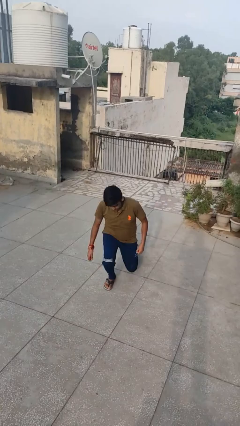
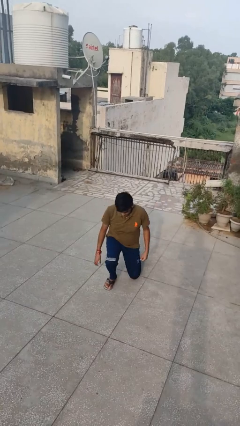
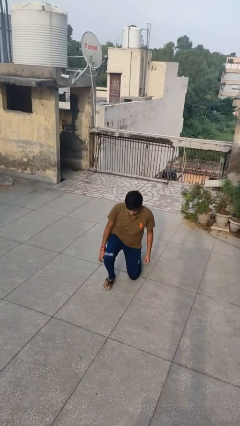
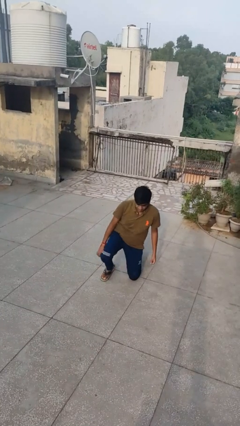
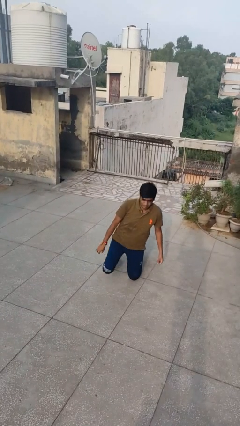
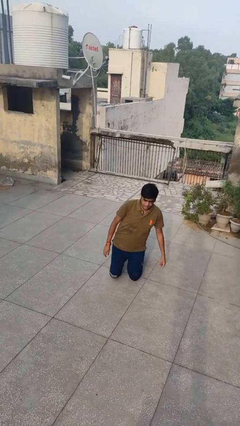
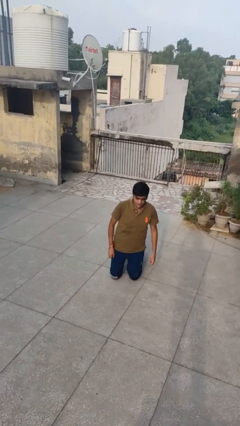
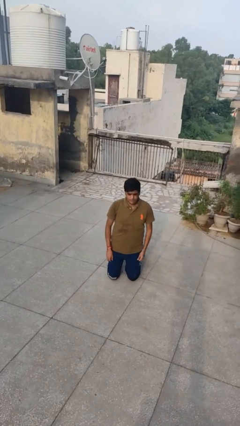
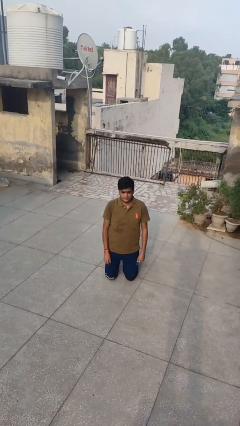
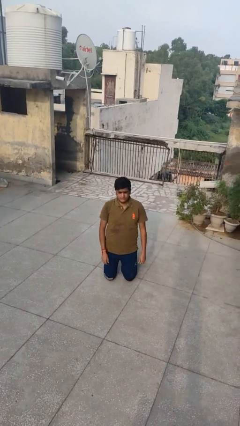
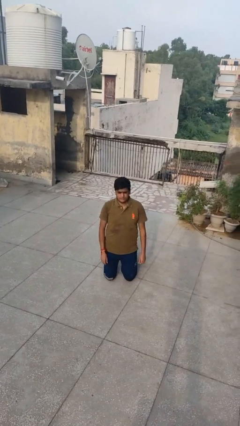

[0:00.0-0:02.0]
person kneels

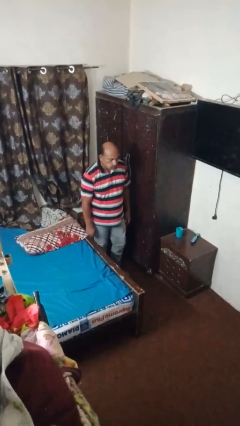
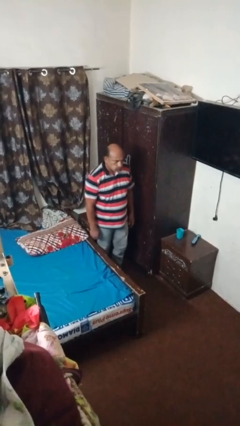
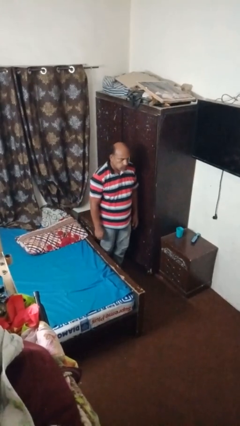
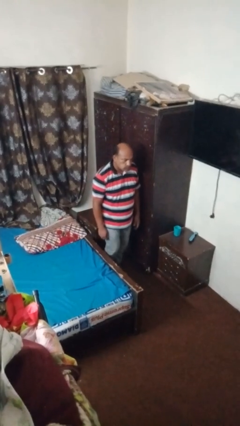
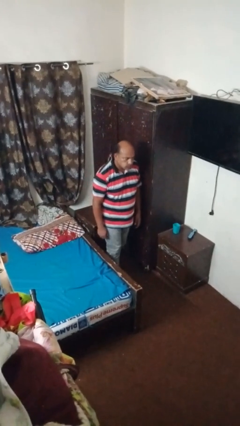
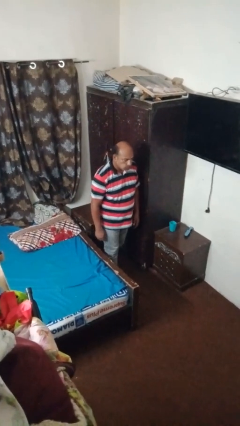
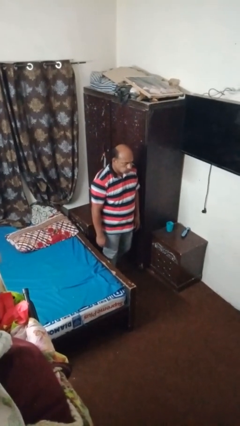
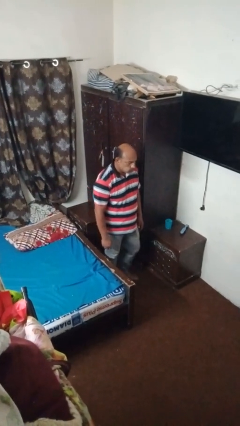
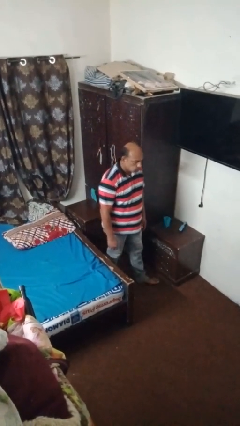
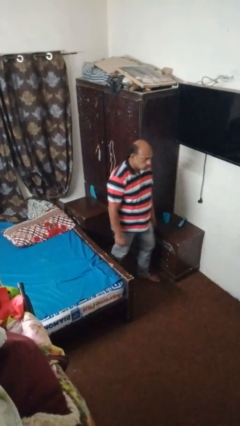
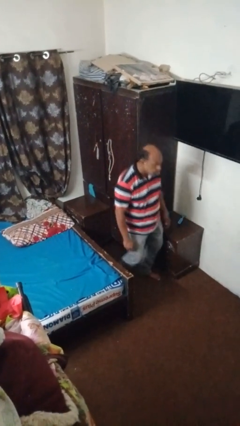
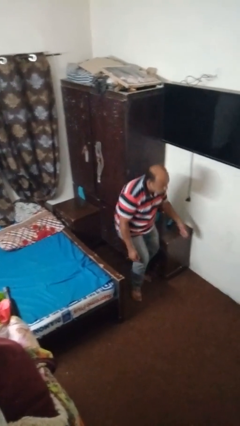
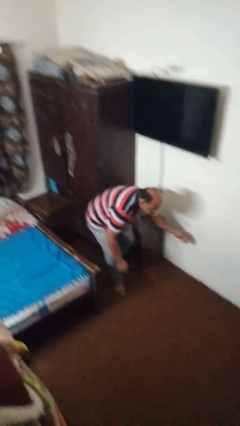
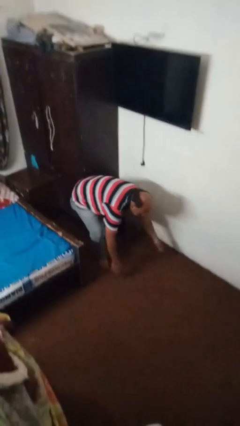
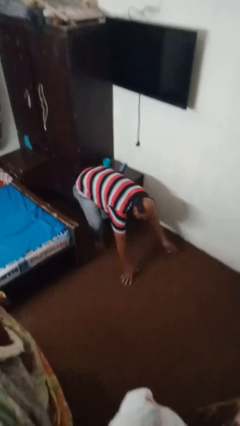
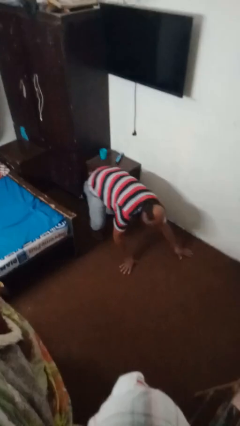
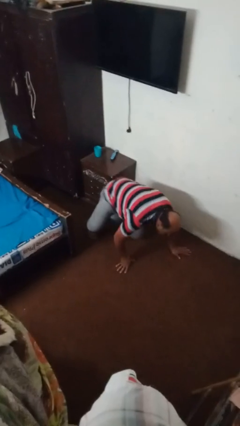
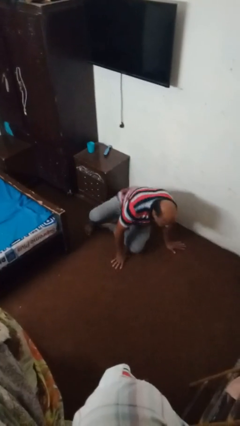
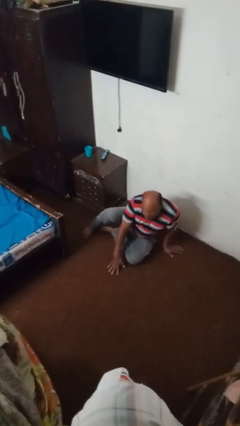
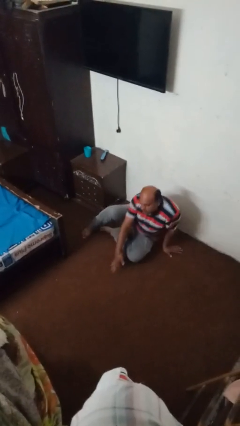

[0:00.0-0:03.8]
person trips on object on floor

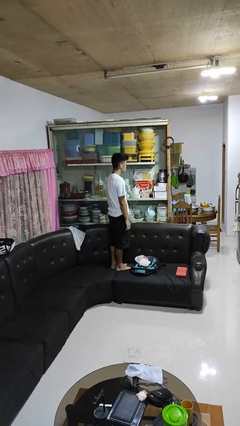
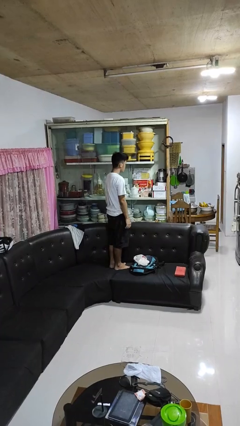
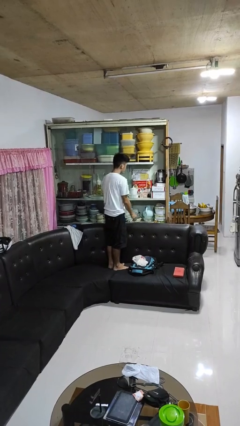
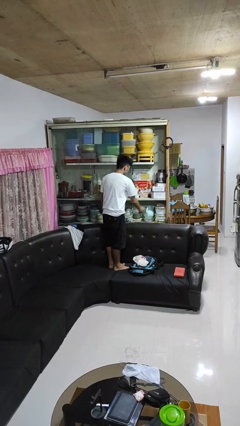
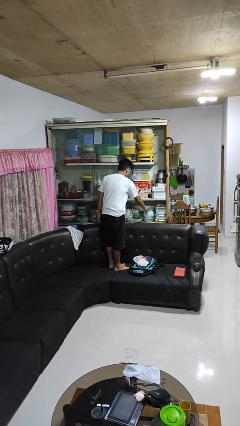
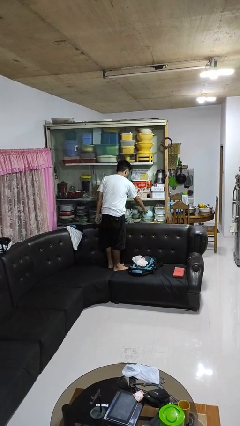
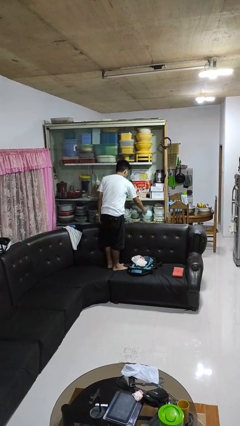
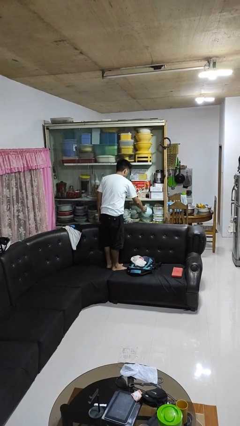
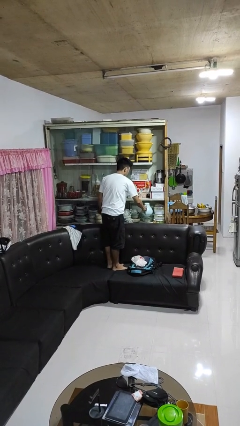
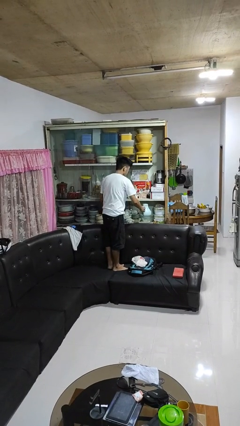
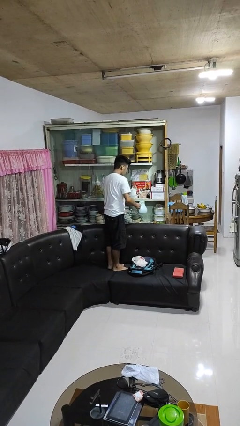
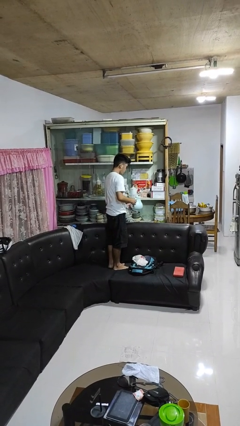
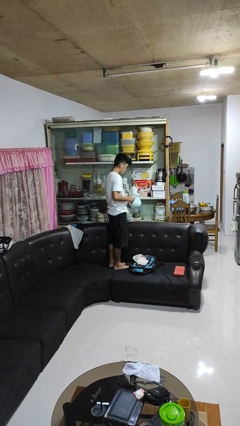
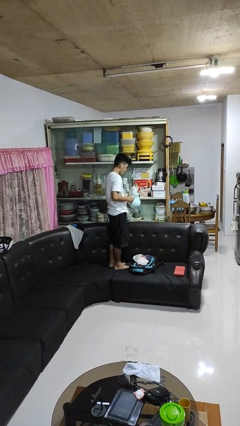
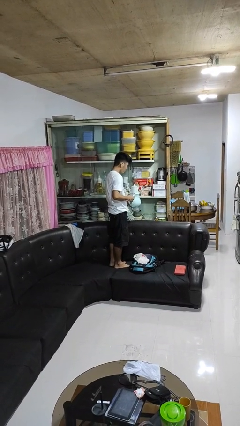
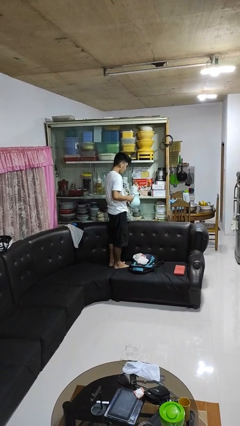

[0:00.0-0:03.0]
person picks up object from cabinet

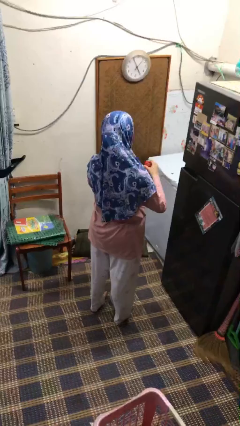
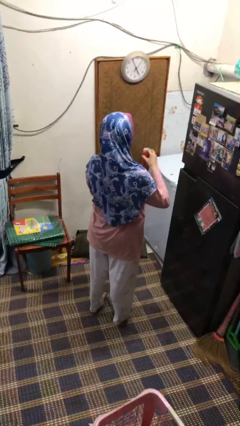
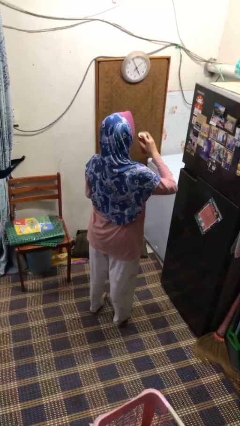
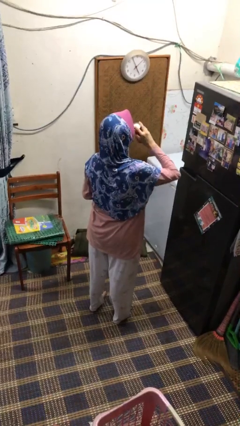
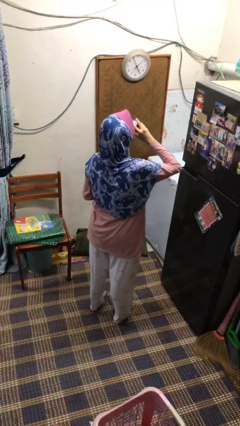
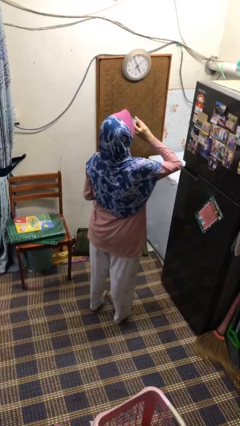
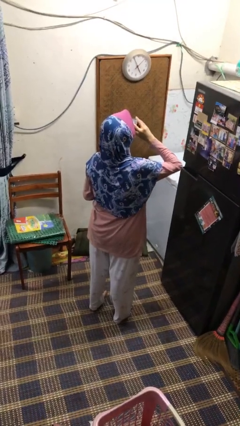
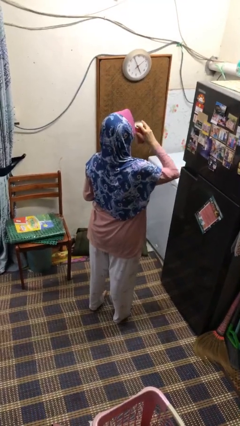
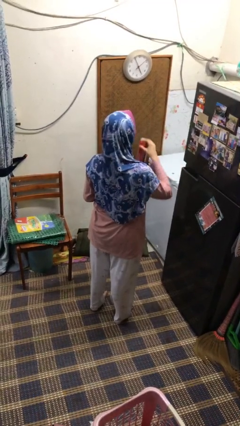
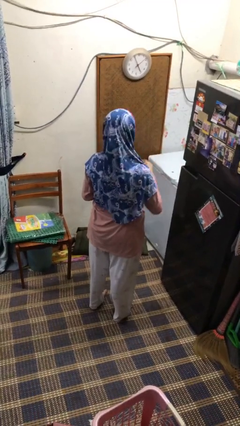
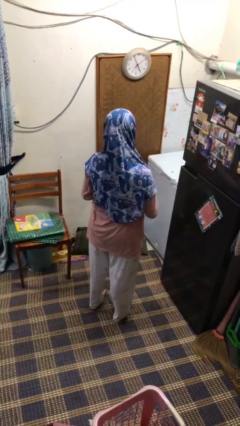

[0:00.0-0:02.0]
person drinks from beverage can

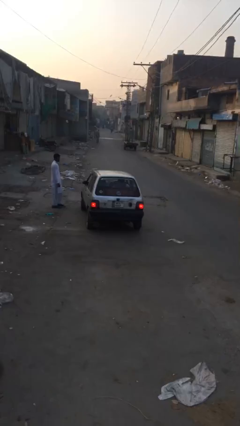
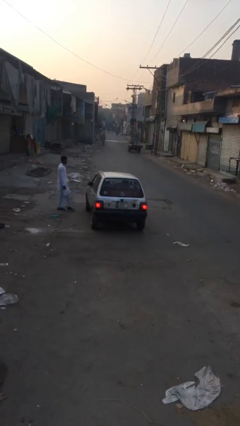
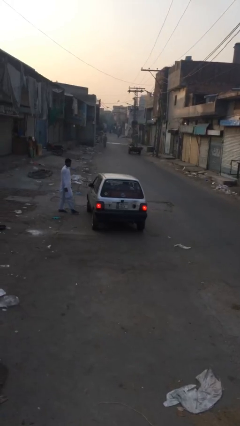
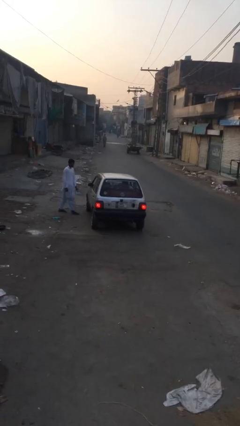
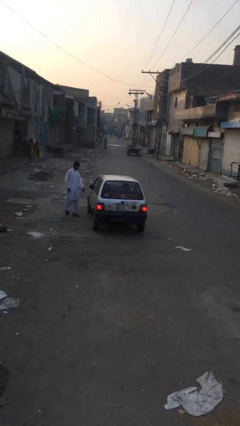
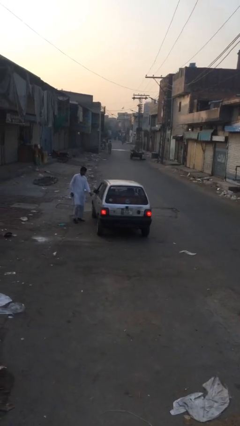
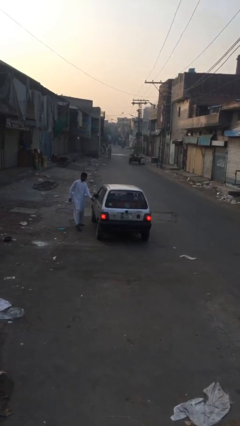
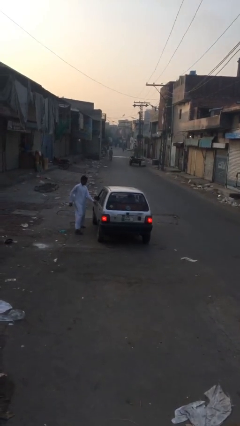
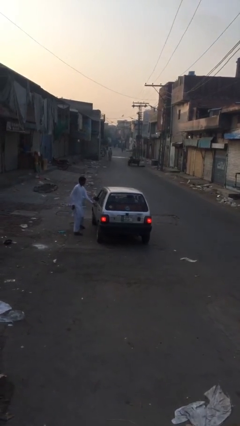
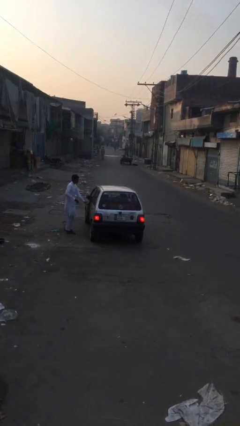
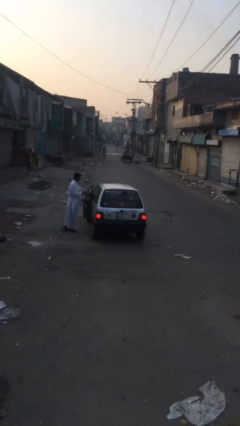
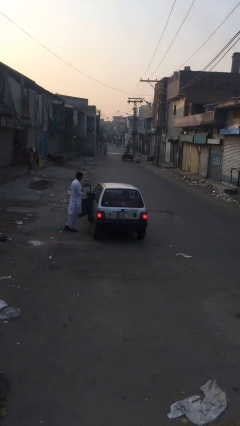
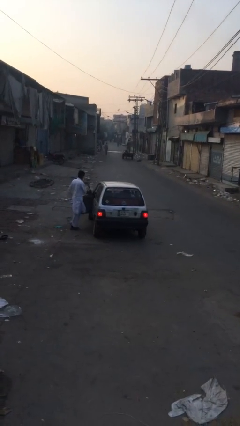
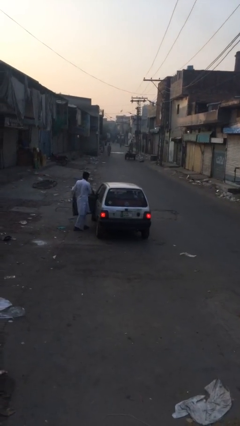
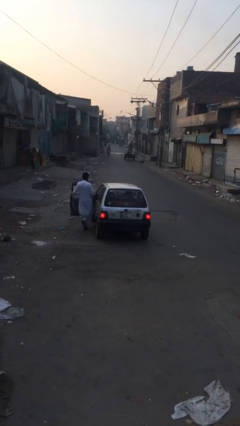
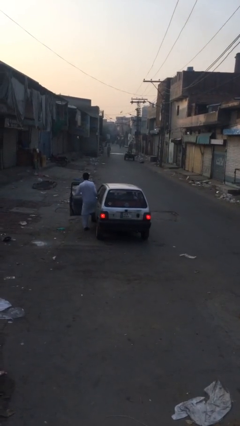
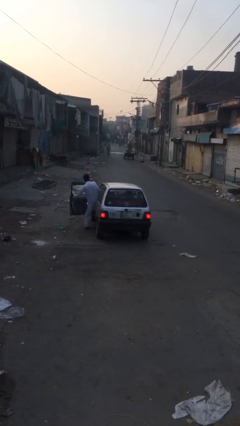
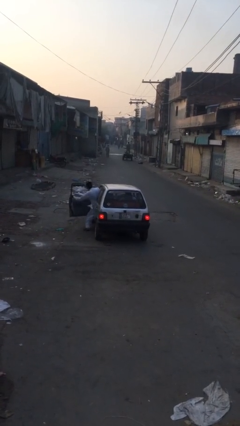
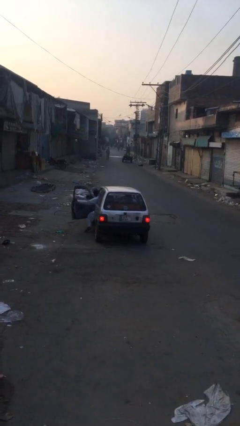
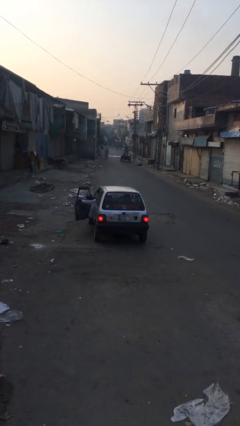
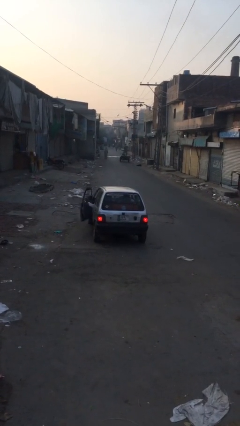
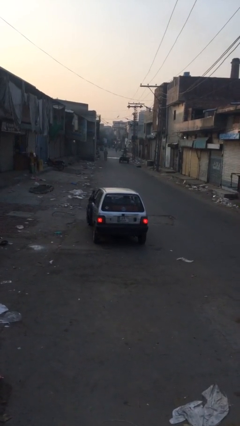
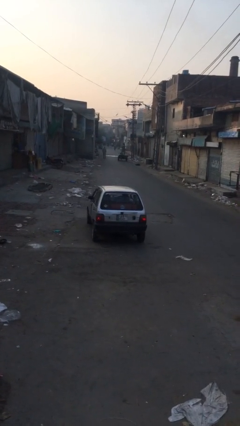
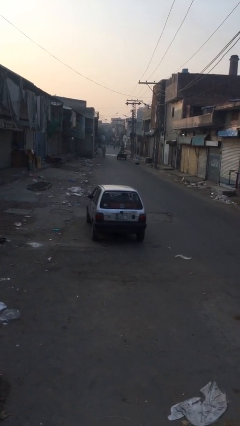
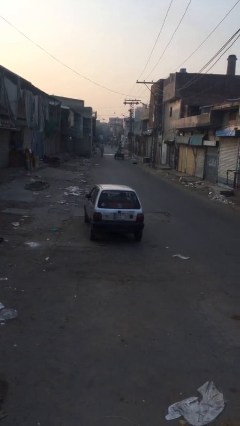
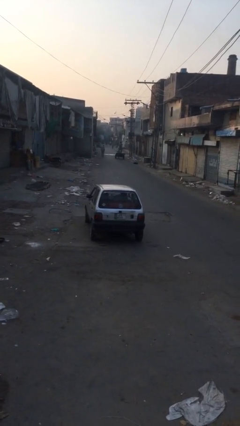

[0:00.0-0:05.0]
car picks up person

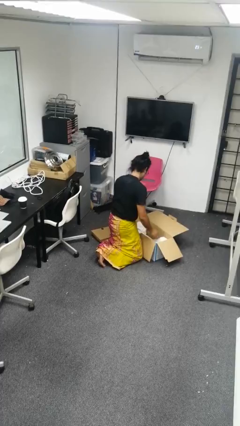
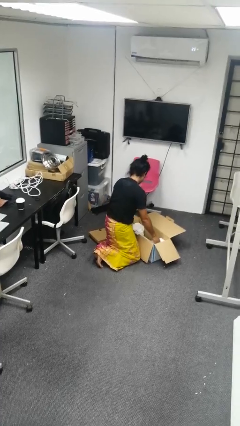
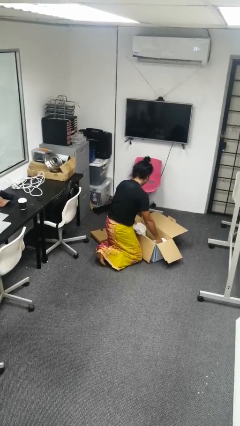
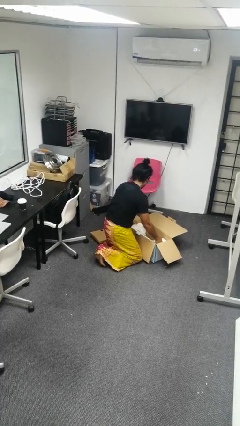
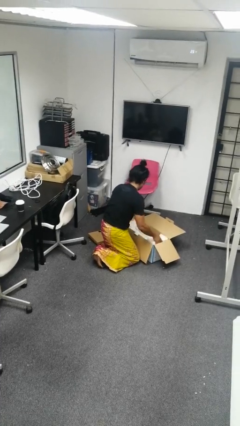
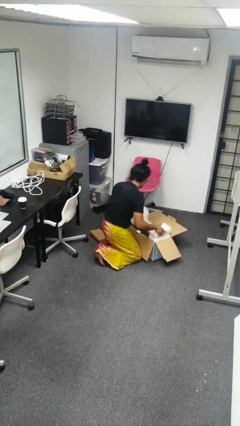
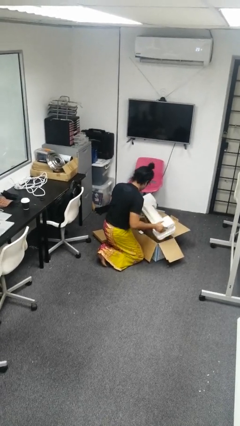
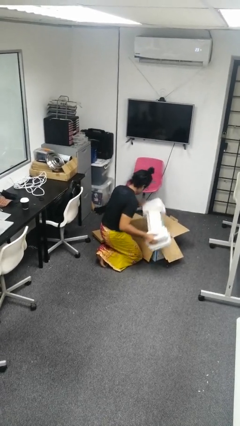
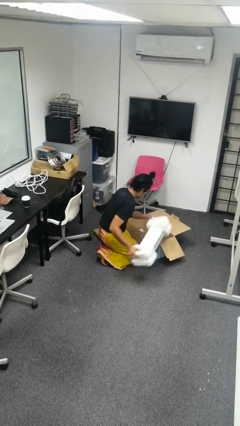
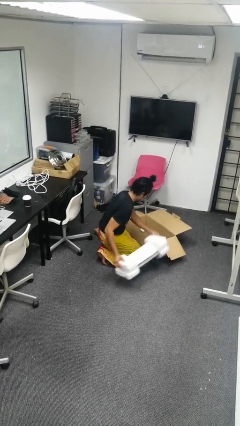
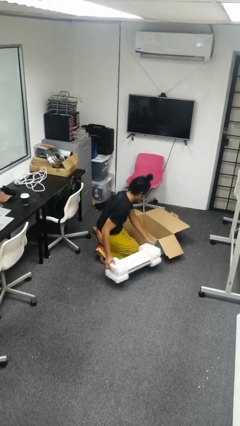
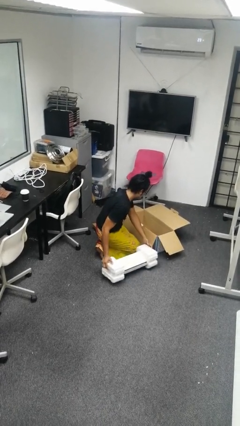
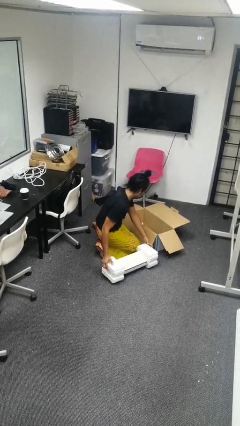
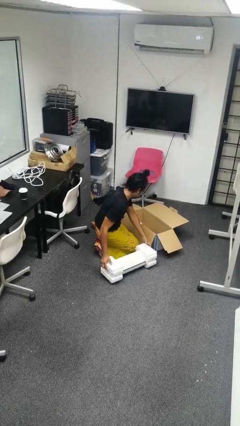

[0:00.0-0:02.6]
person takes object from box
